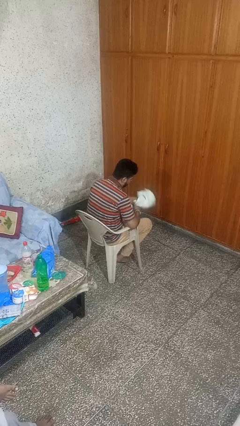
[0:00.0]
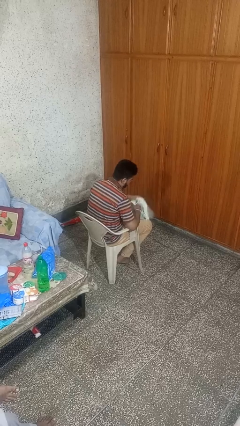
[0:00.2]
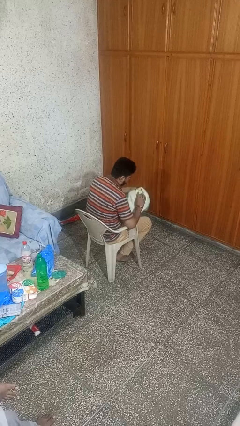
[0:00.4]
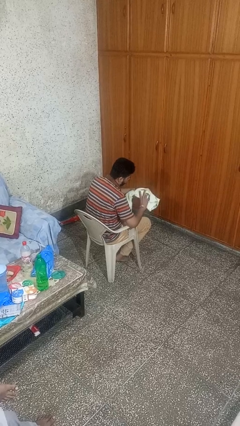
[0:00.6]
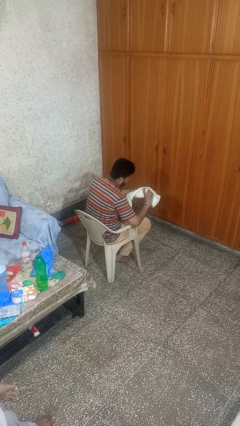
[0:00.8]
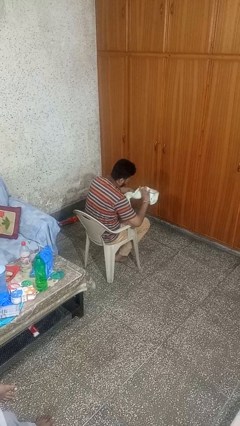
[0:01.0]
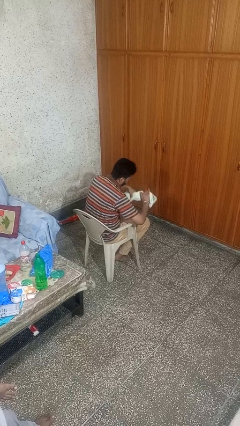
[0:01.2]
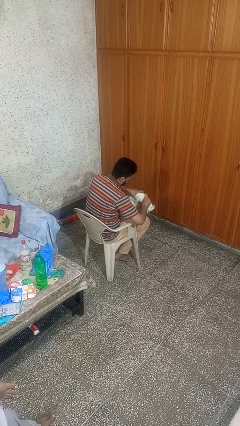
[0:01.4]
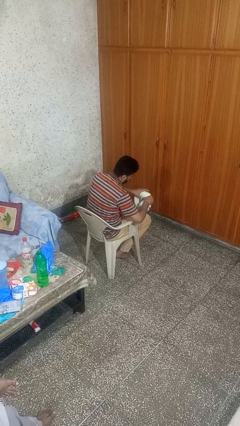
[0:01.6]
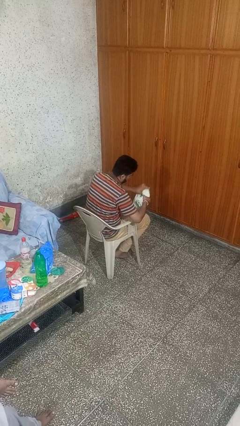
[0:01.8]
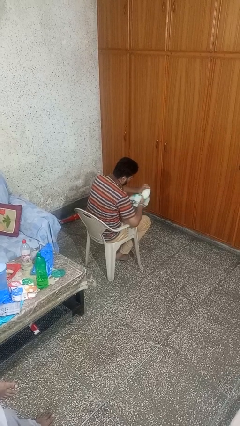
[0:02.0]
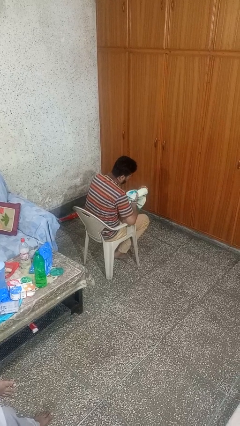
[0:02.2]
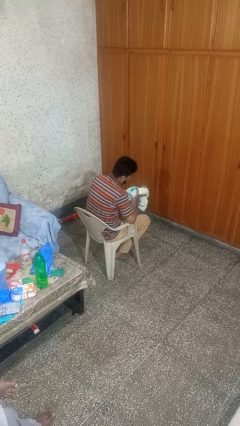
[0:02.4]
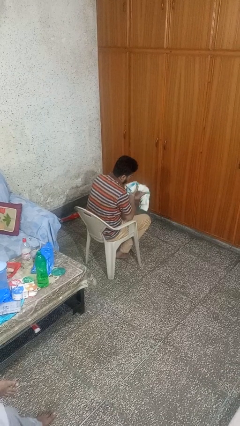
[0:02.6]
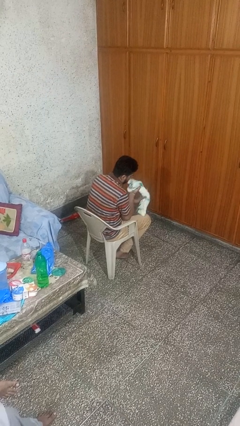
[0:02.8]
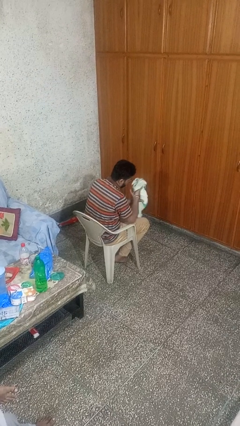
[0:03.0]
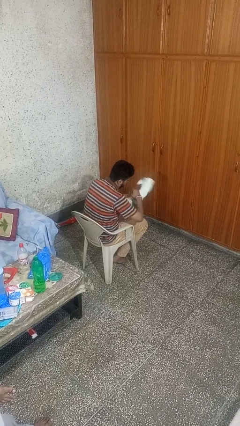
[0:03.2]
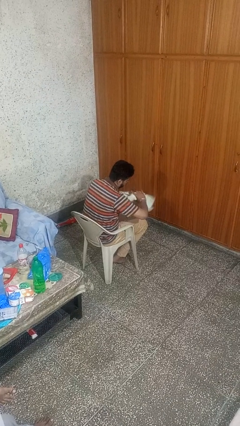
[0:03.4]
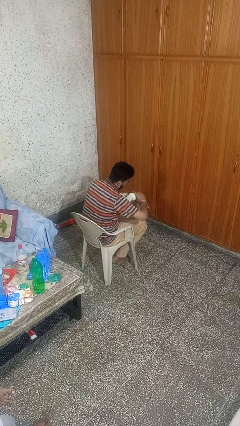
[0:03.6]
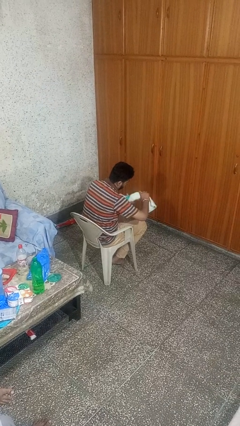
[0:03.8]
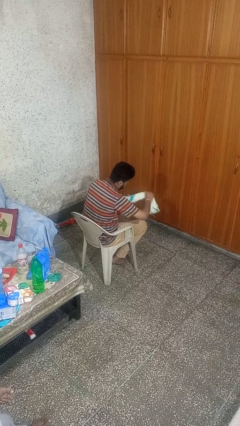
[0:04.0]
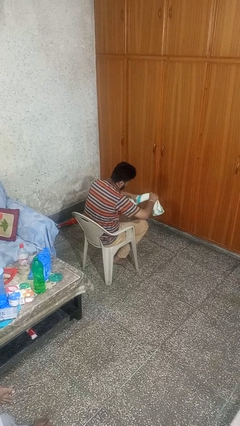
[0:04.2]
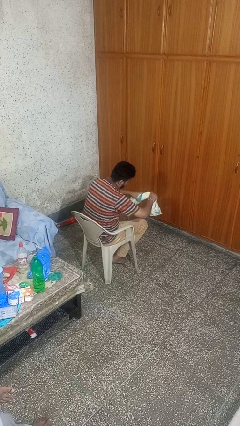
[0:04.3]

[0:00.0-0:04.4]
person squeezes object

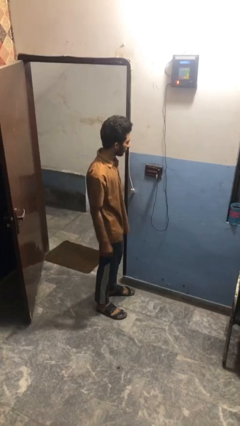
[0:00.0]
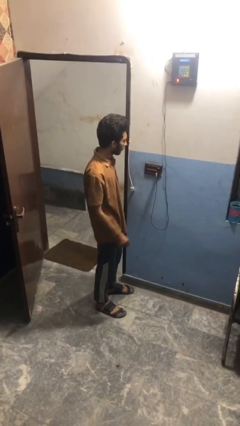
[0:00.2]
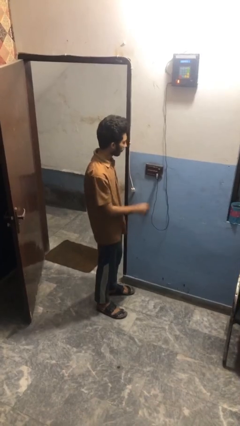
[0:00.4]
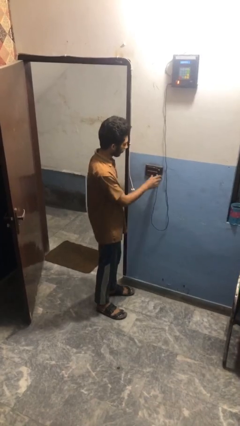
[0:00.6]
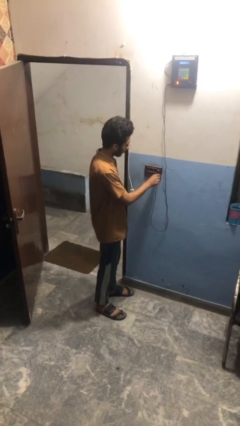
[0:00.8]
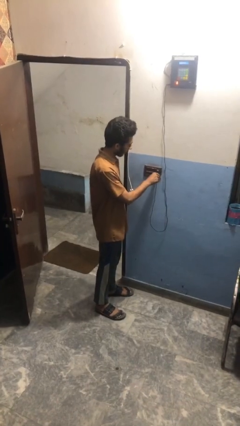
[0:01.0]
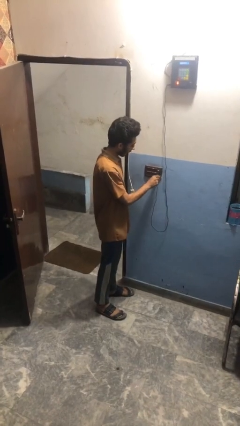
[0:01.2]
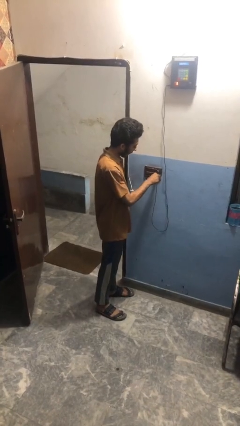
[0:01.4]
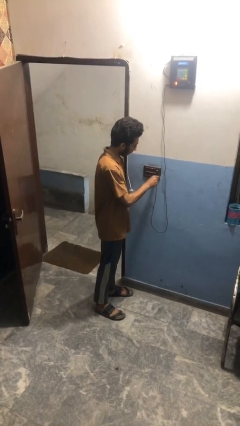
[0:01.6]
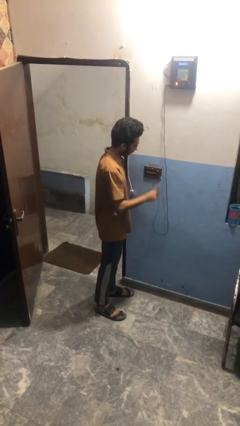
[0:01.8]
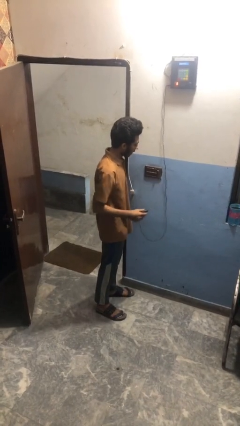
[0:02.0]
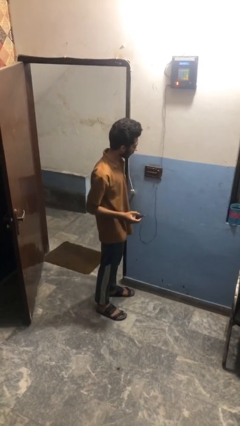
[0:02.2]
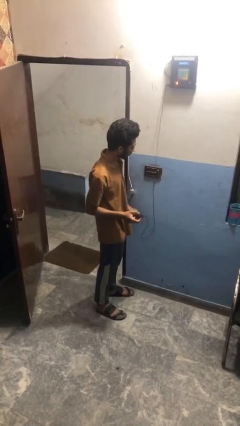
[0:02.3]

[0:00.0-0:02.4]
person unplugs from electrical socket

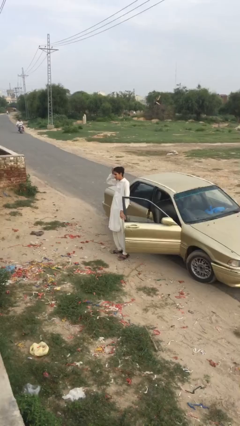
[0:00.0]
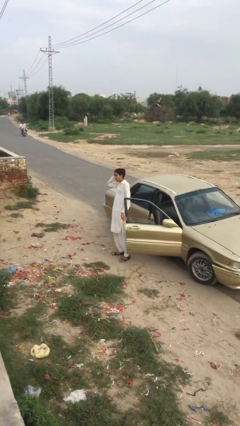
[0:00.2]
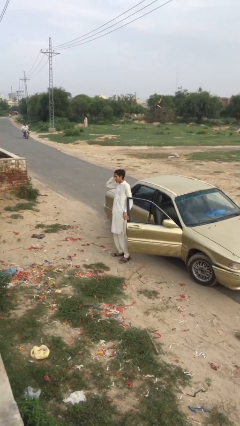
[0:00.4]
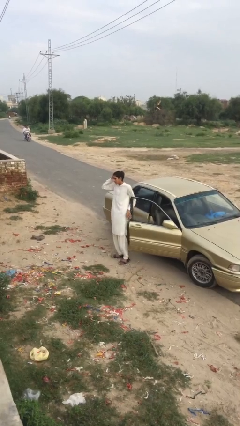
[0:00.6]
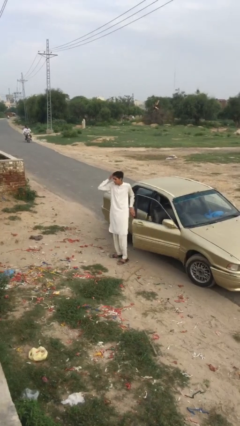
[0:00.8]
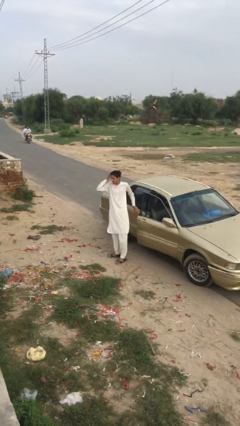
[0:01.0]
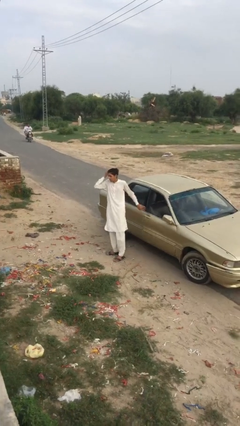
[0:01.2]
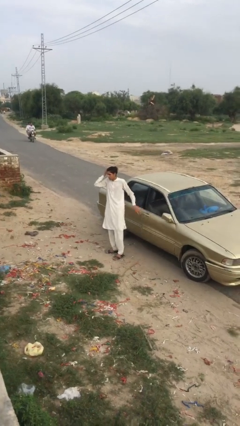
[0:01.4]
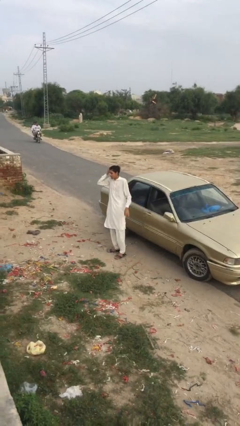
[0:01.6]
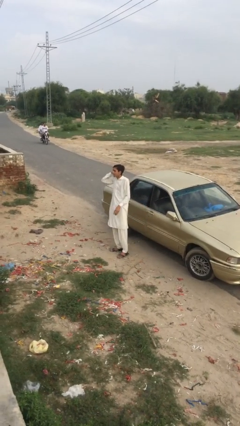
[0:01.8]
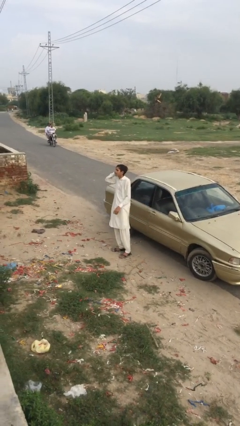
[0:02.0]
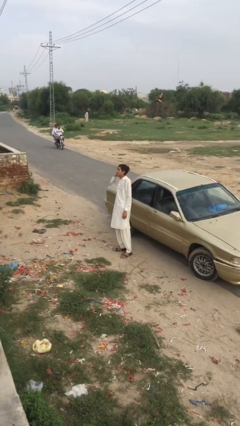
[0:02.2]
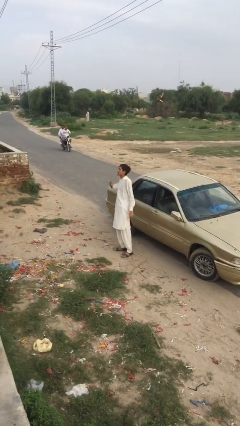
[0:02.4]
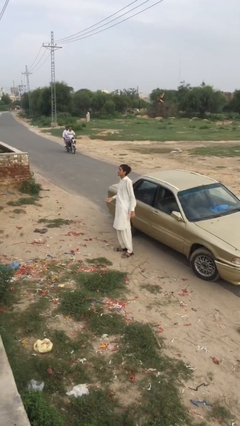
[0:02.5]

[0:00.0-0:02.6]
person closes car door

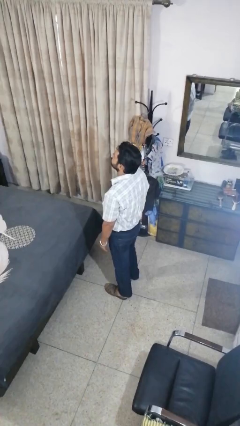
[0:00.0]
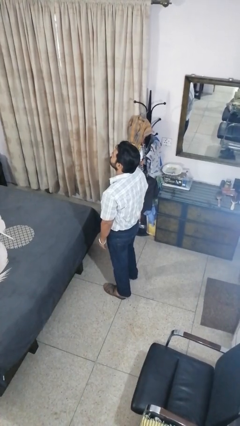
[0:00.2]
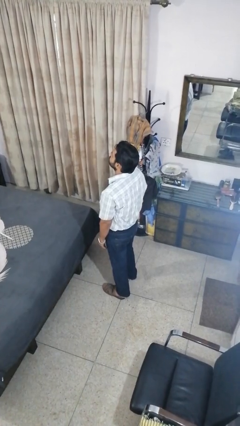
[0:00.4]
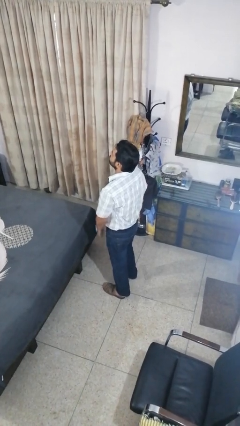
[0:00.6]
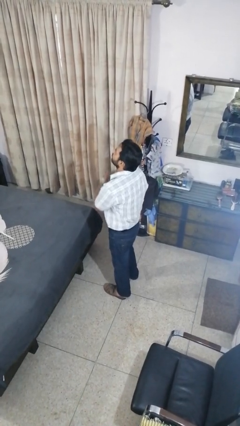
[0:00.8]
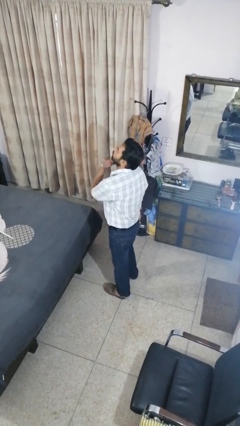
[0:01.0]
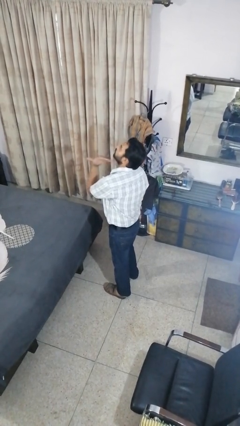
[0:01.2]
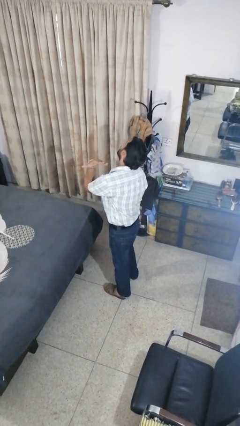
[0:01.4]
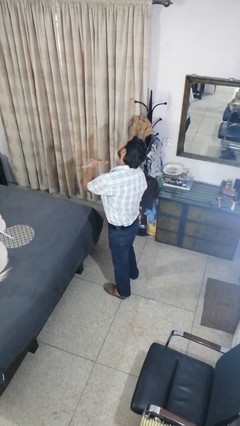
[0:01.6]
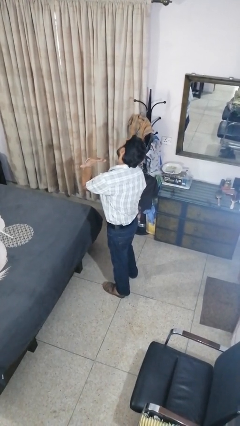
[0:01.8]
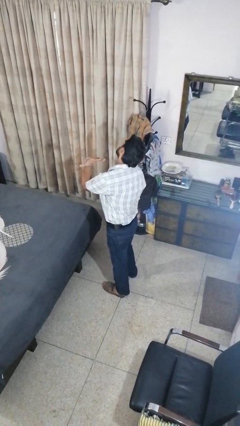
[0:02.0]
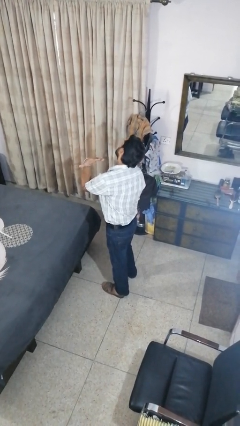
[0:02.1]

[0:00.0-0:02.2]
person gestures cut

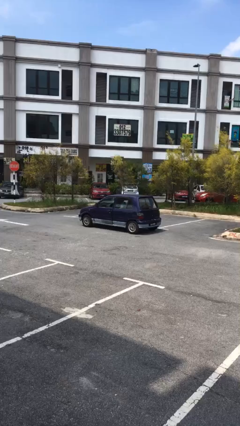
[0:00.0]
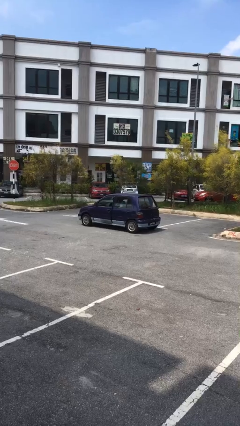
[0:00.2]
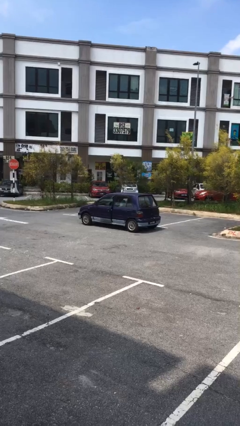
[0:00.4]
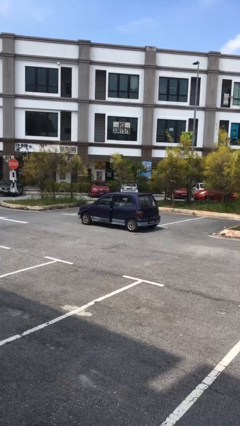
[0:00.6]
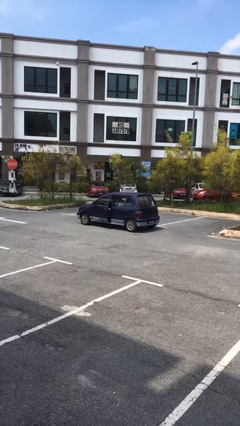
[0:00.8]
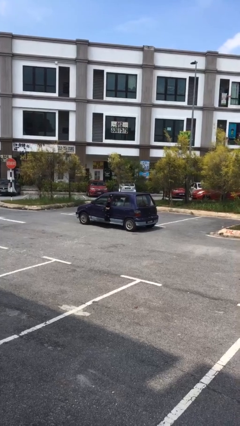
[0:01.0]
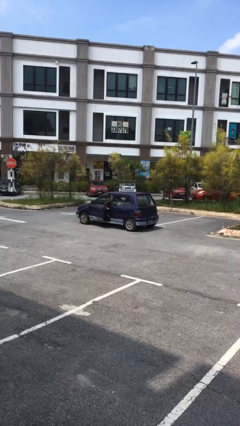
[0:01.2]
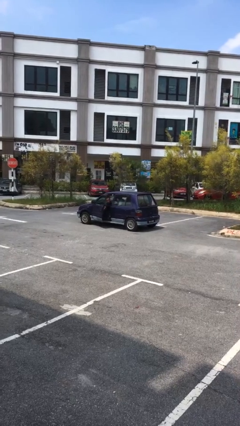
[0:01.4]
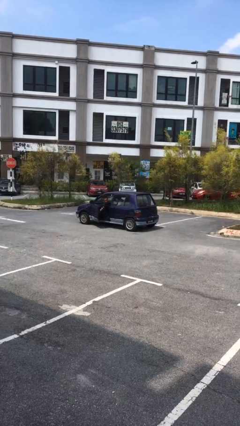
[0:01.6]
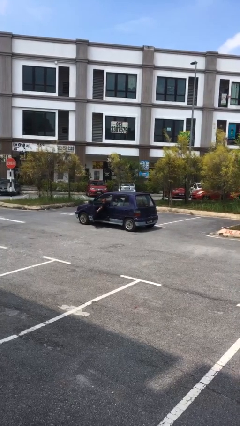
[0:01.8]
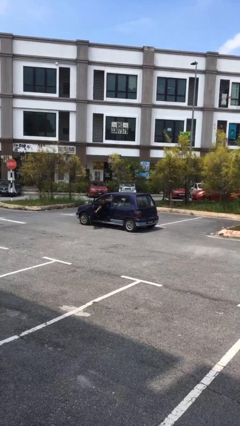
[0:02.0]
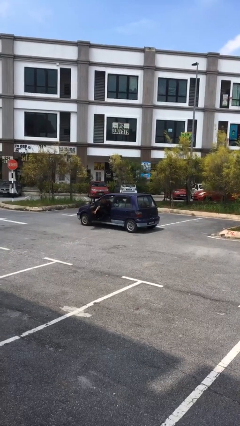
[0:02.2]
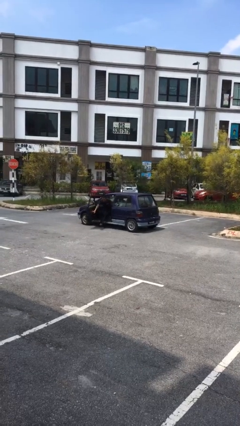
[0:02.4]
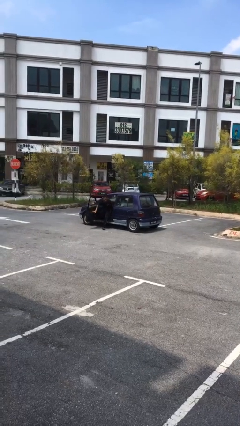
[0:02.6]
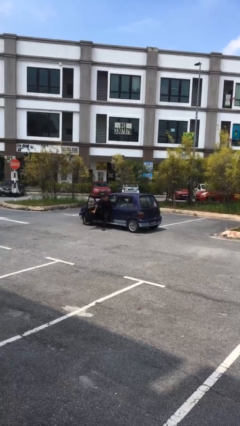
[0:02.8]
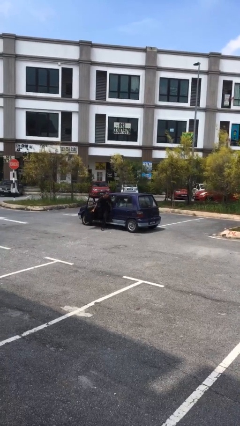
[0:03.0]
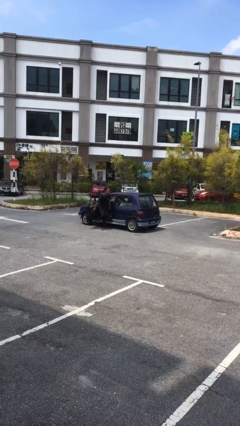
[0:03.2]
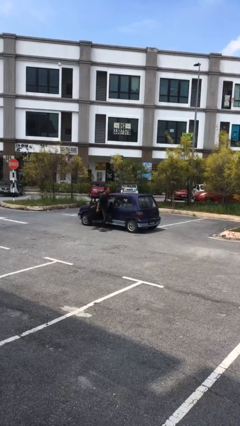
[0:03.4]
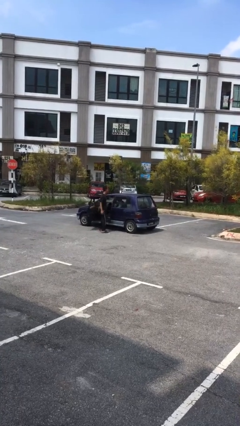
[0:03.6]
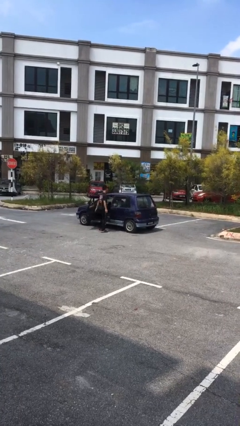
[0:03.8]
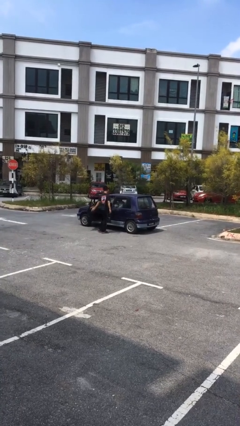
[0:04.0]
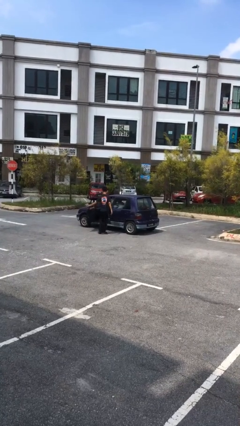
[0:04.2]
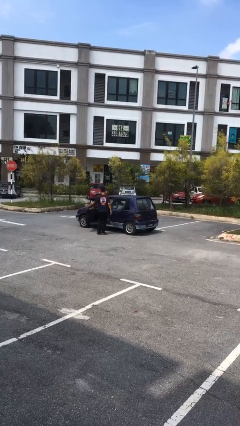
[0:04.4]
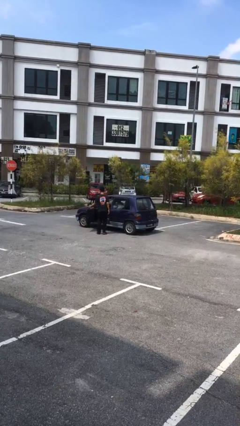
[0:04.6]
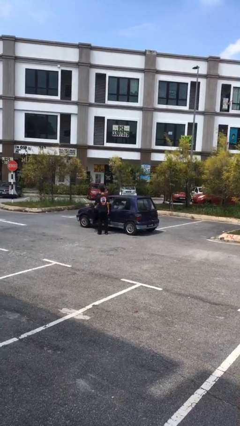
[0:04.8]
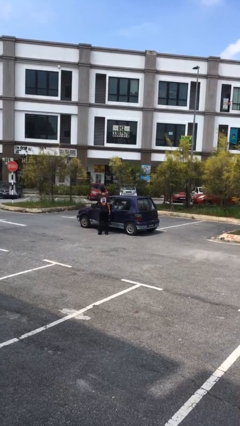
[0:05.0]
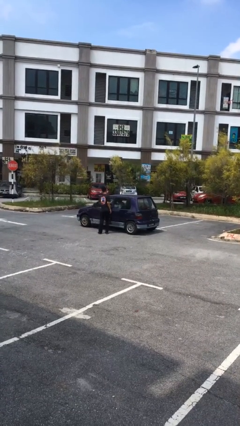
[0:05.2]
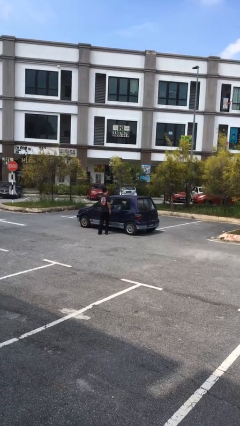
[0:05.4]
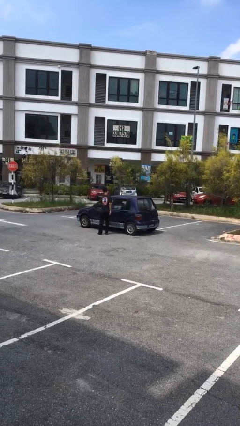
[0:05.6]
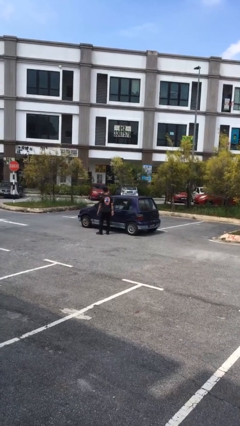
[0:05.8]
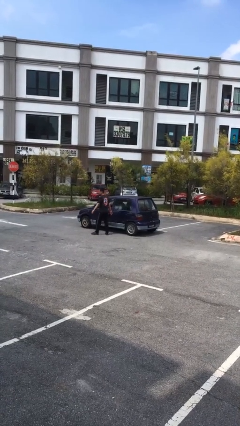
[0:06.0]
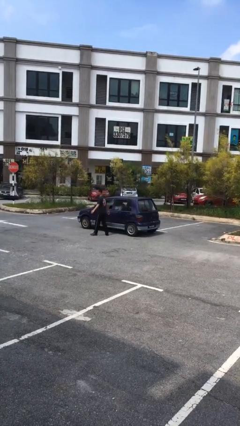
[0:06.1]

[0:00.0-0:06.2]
car drops off person
